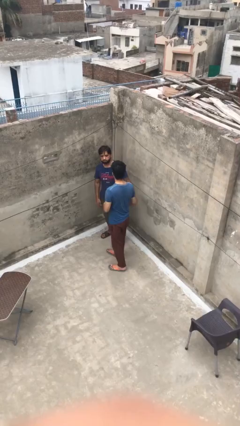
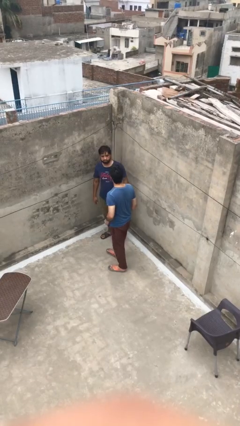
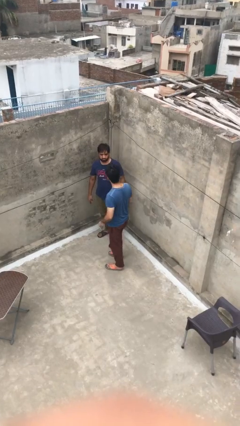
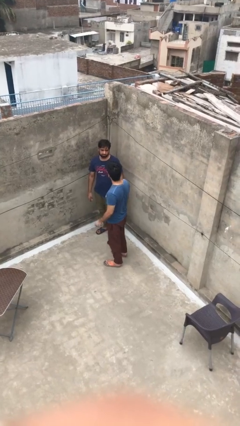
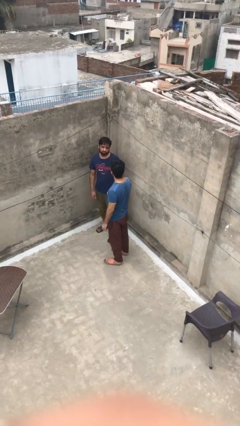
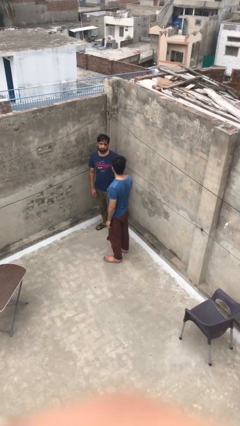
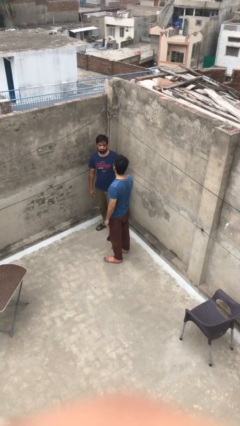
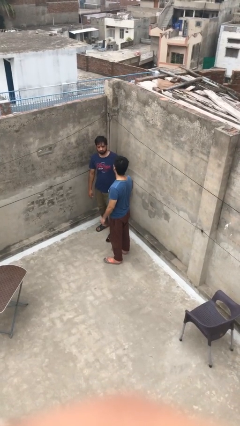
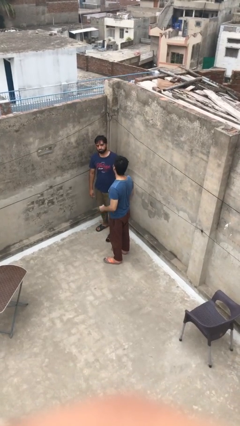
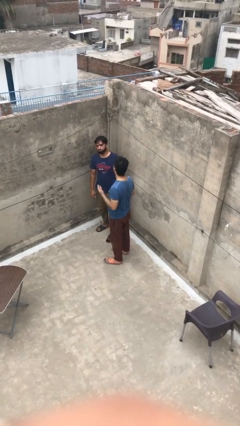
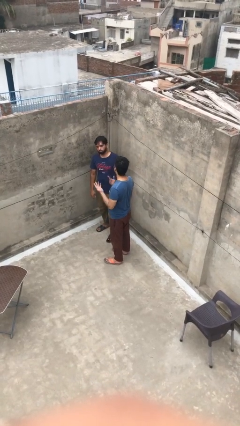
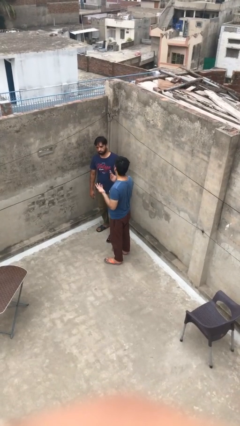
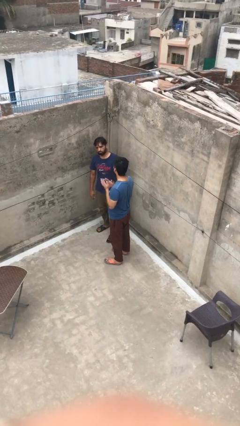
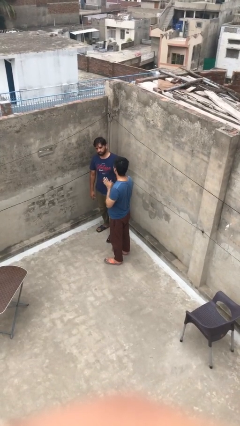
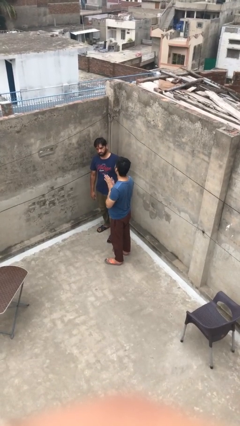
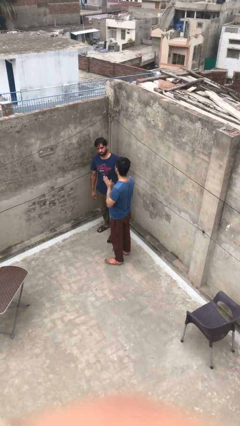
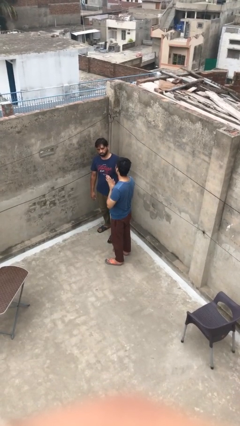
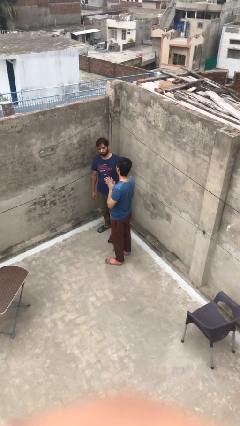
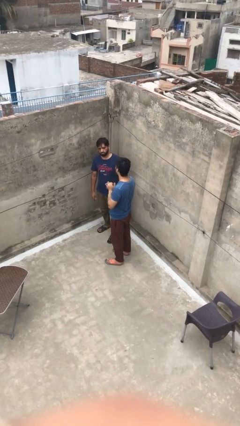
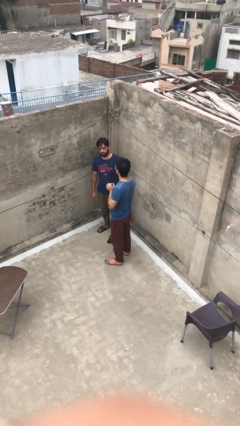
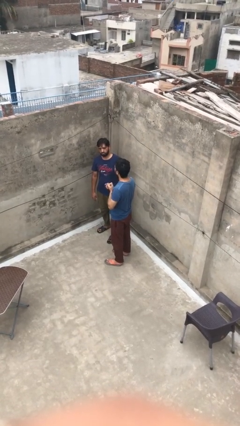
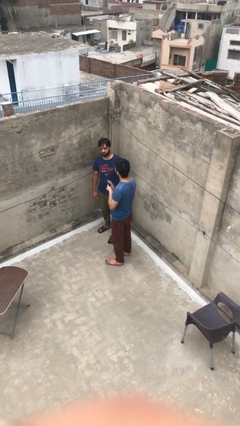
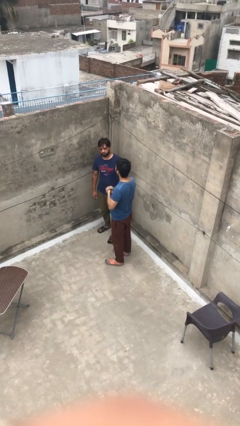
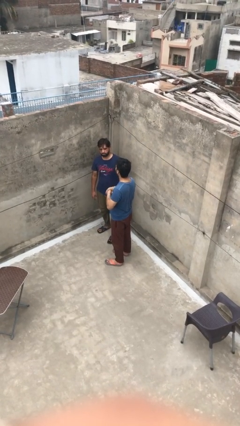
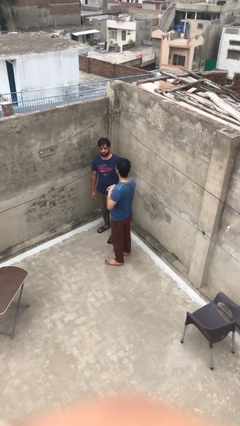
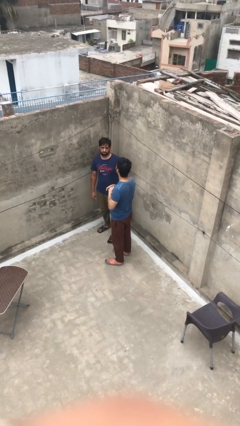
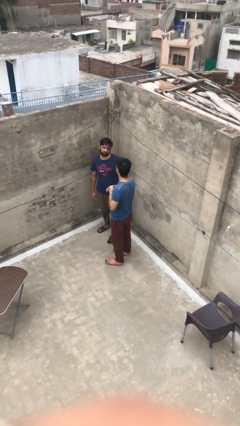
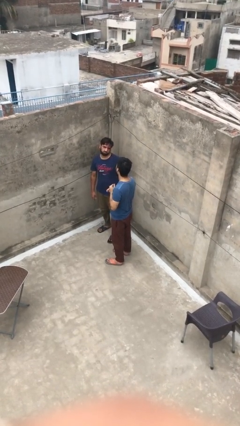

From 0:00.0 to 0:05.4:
person talks to person

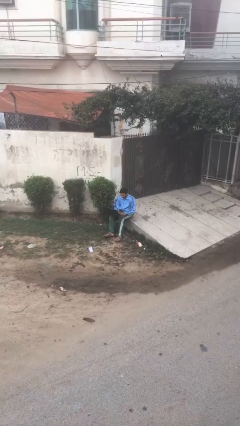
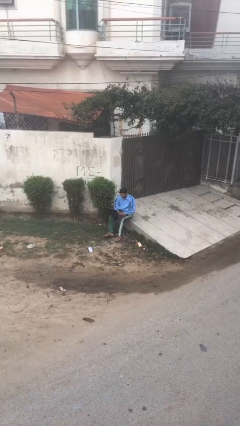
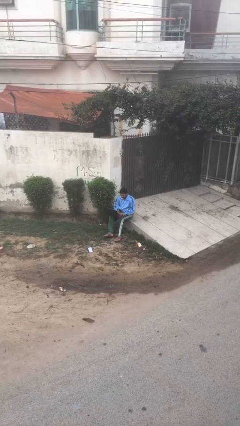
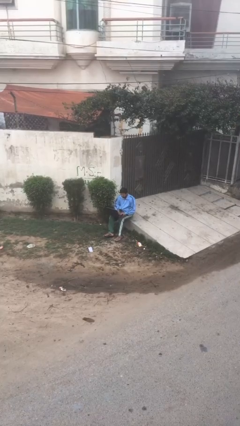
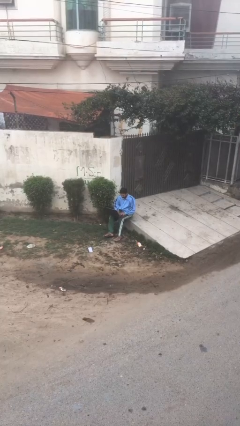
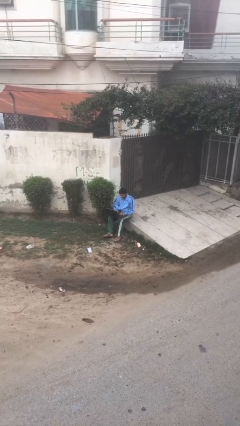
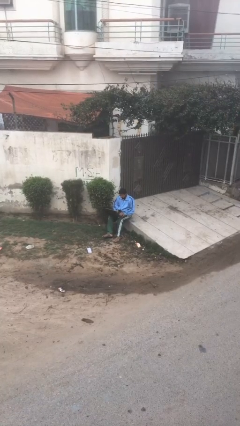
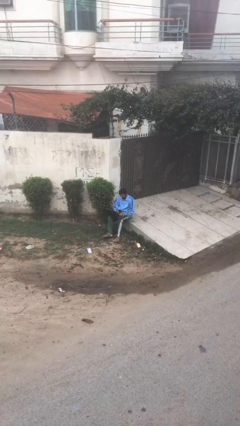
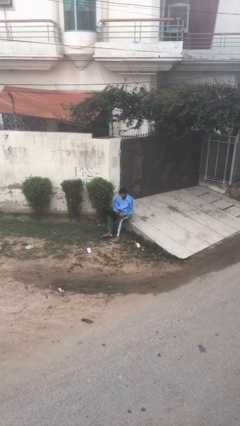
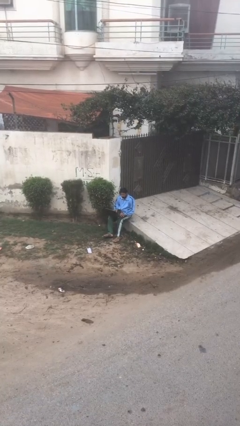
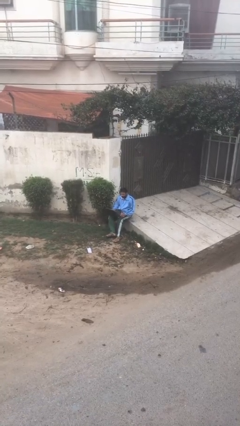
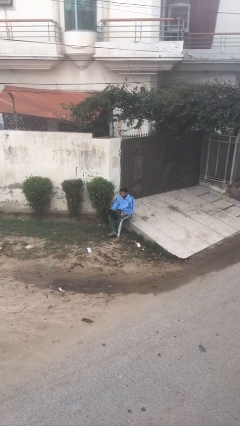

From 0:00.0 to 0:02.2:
person interacts with laptop

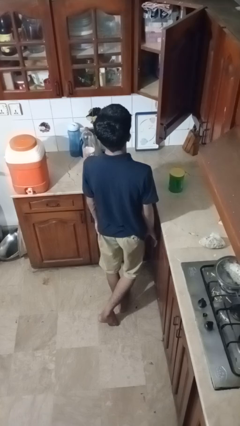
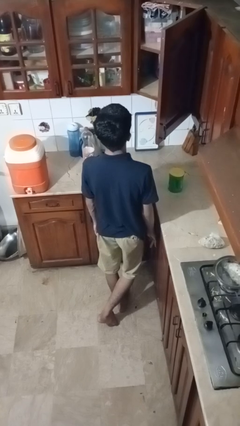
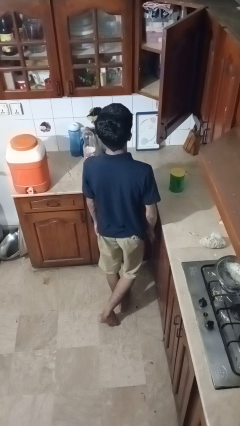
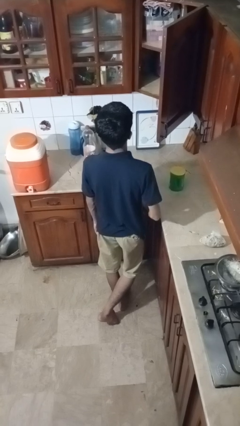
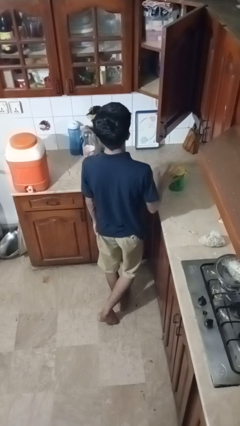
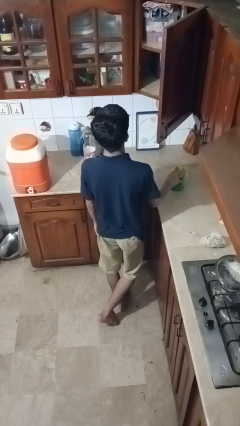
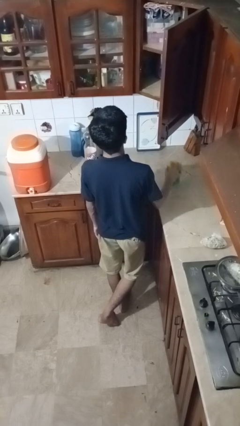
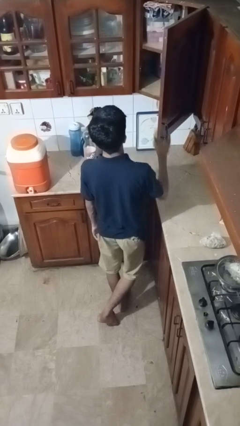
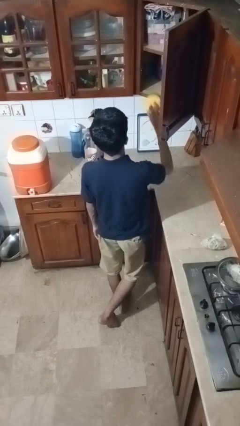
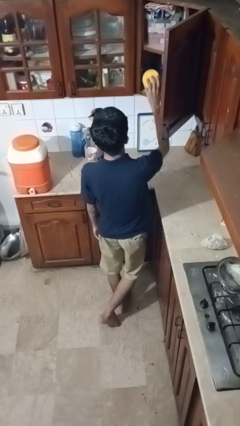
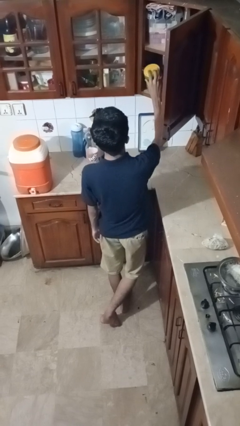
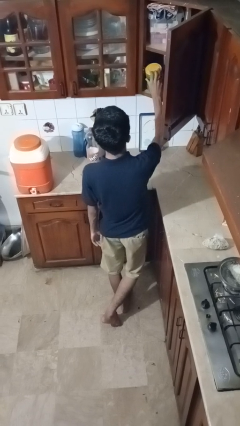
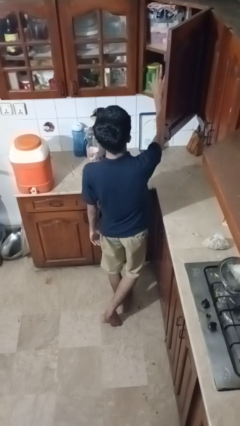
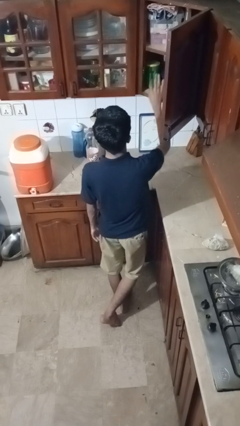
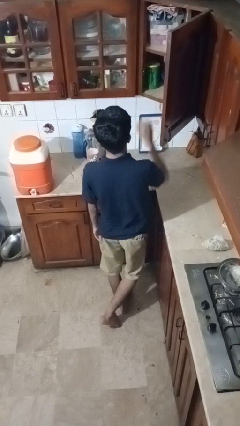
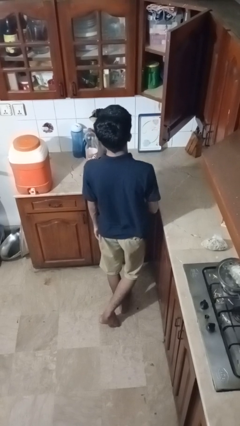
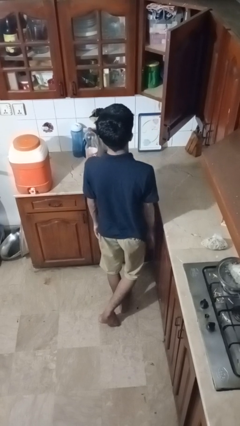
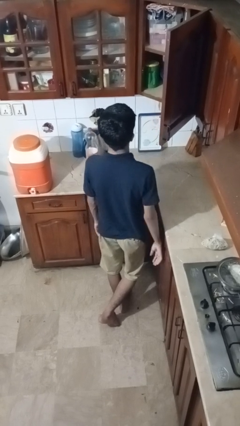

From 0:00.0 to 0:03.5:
person puts object in cabinet

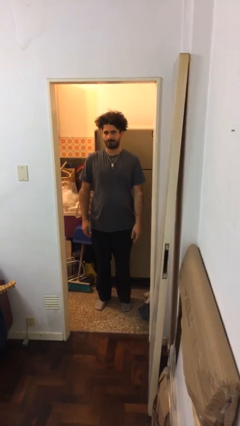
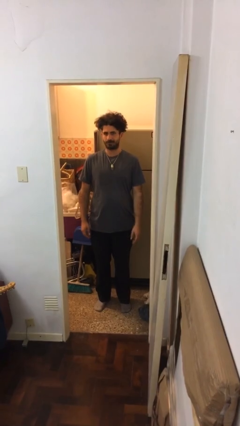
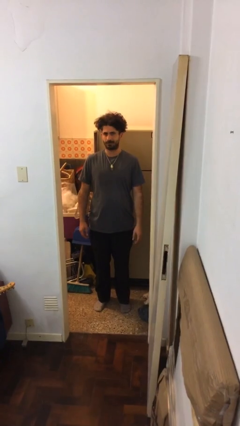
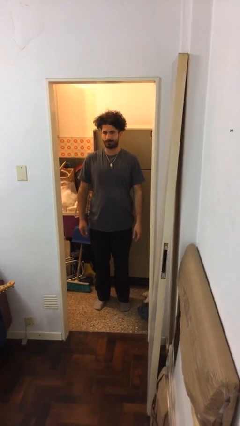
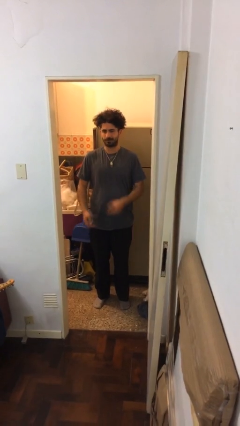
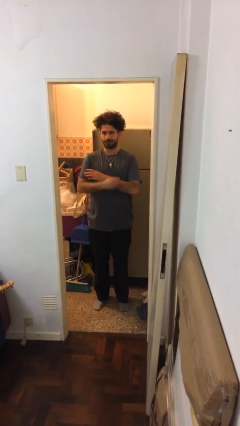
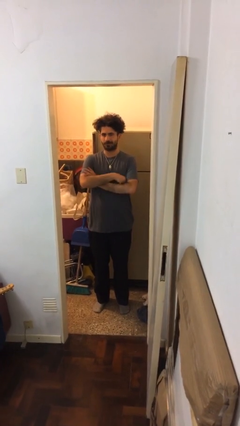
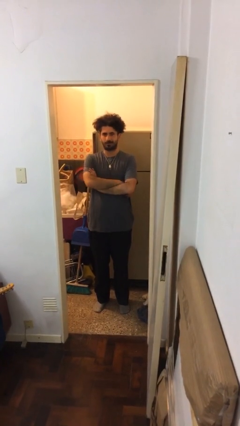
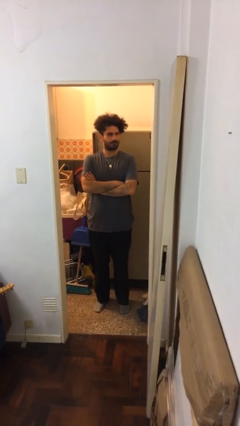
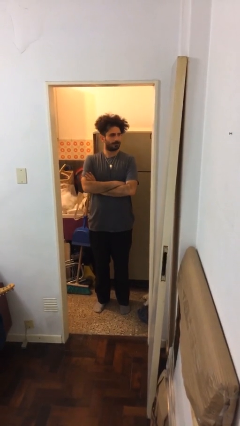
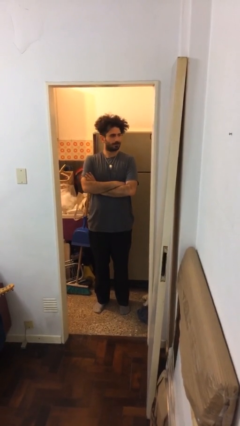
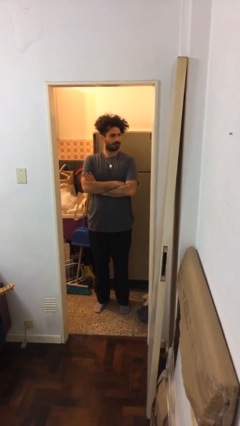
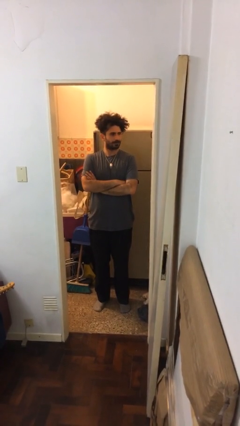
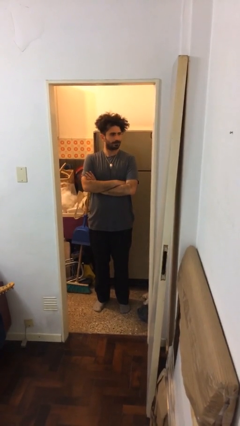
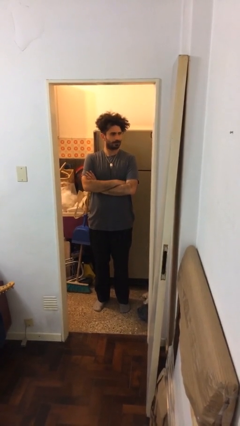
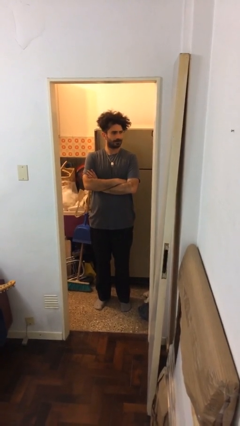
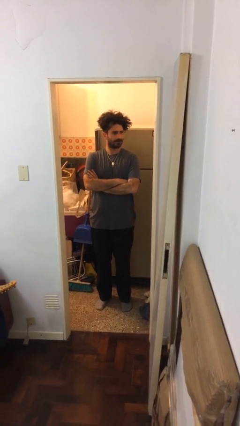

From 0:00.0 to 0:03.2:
person crosses arms

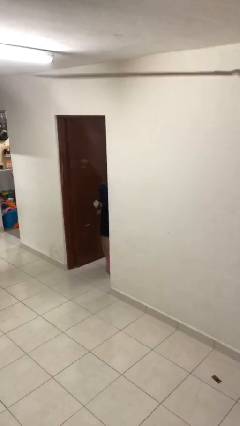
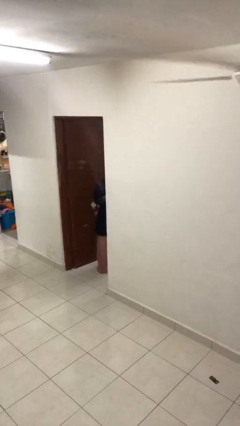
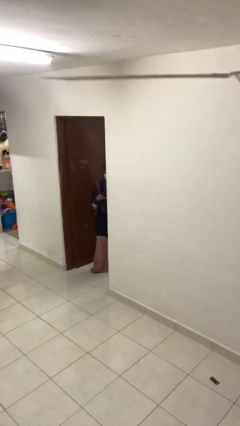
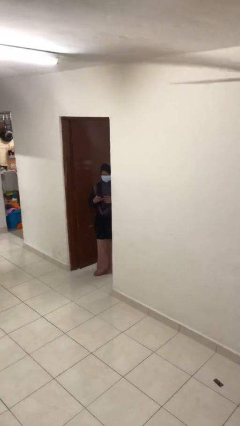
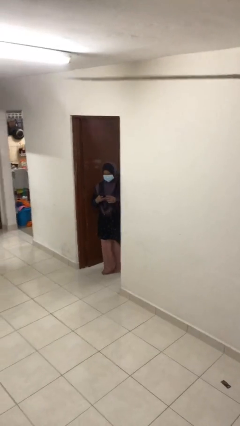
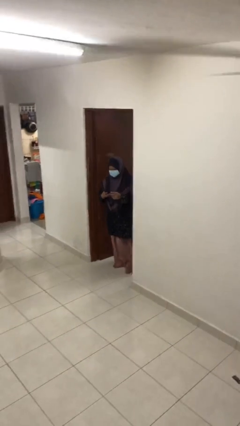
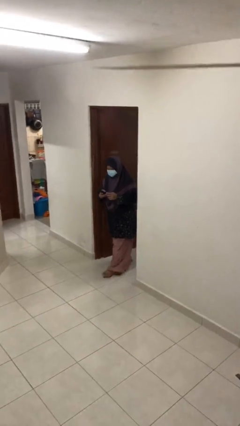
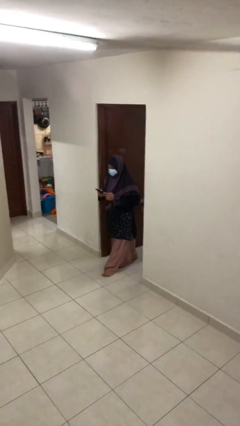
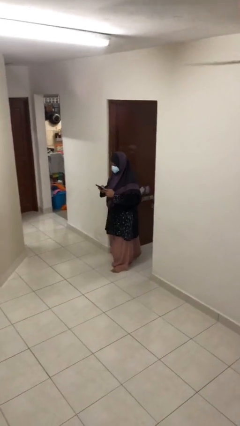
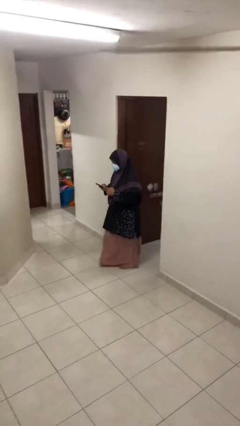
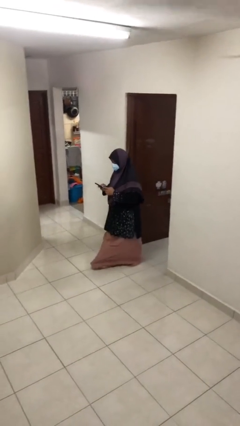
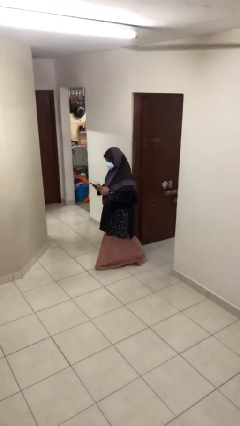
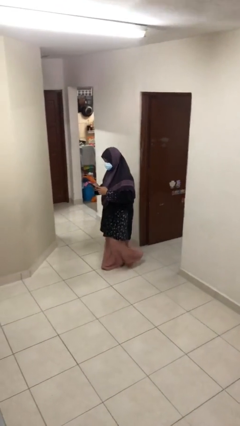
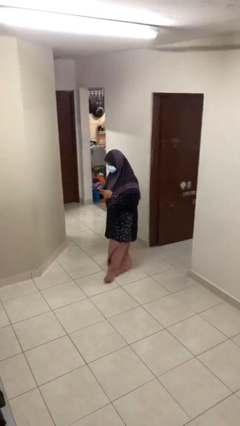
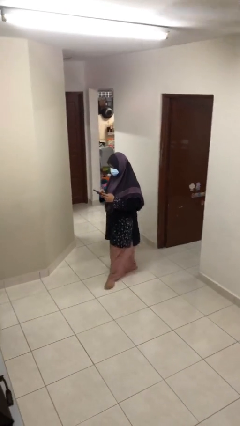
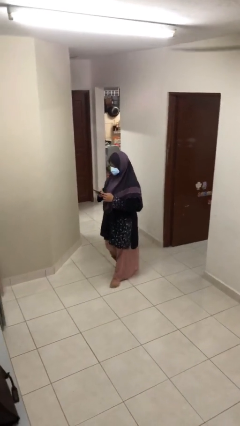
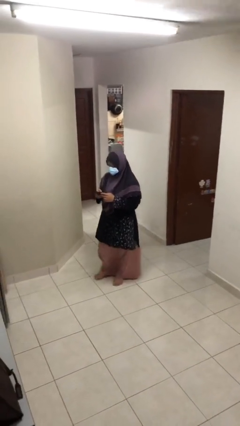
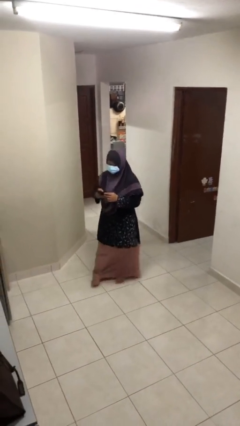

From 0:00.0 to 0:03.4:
person exits scene through structure

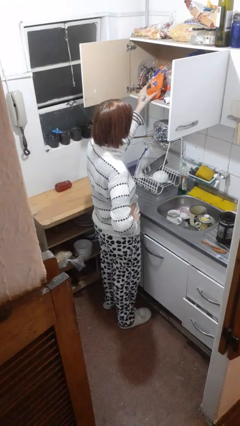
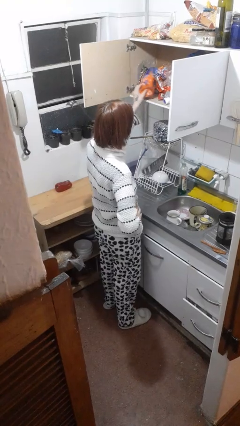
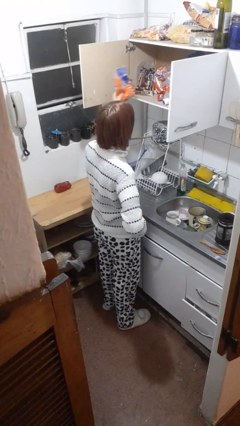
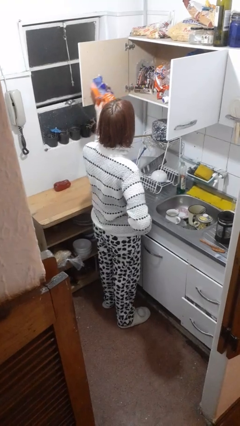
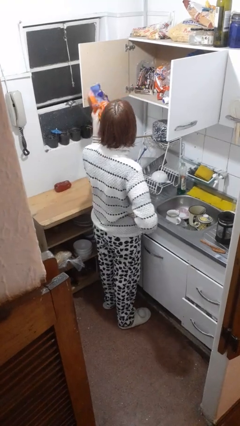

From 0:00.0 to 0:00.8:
person takes object from cabinet
